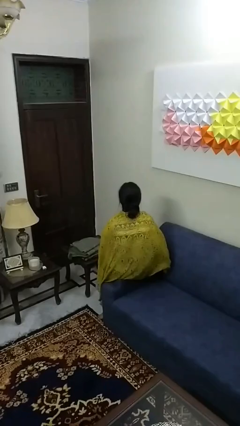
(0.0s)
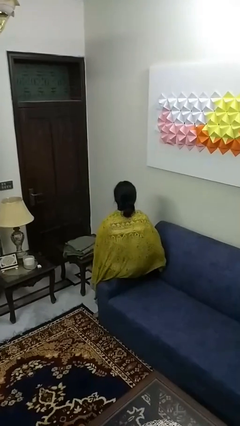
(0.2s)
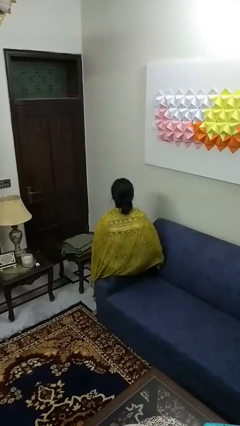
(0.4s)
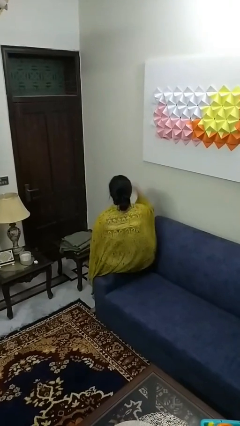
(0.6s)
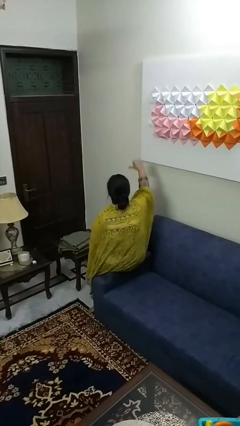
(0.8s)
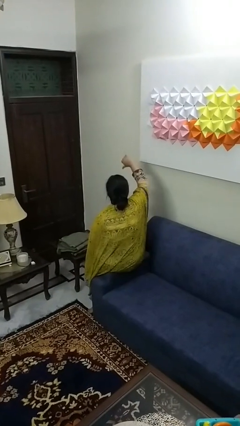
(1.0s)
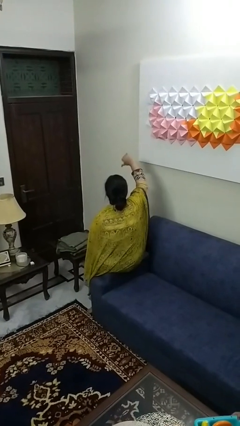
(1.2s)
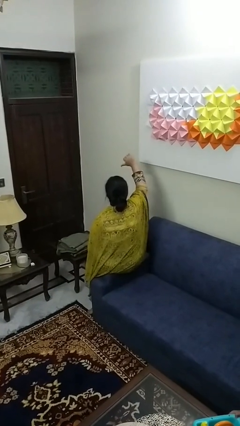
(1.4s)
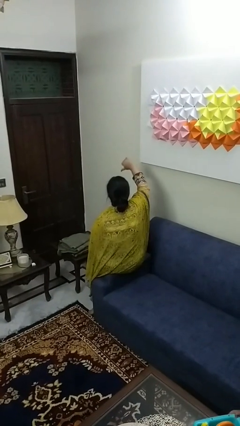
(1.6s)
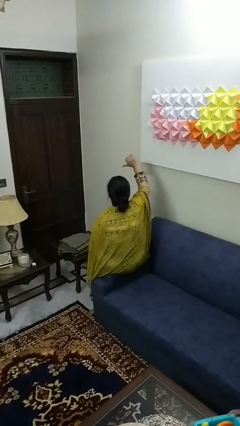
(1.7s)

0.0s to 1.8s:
person gestures thumbs down

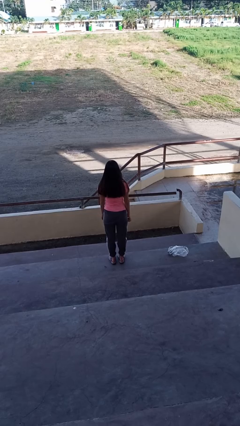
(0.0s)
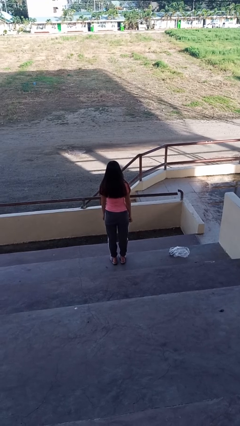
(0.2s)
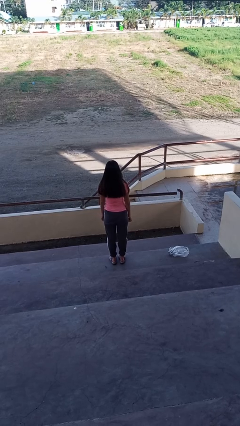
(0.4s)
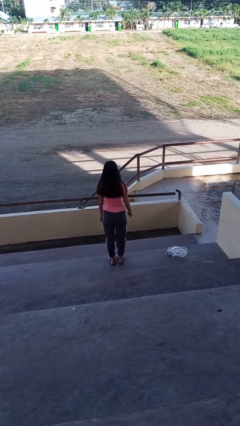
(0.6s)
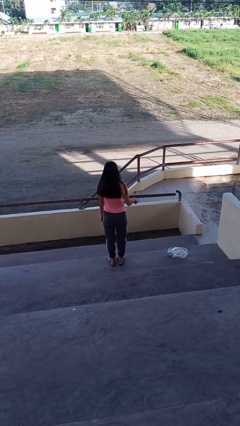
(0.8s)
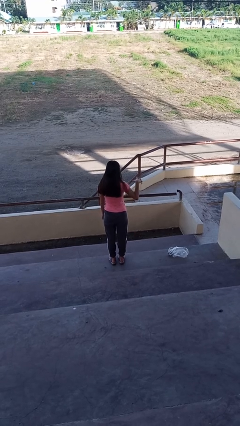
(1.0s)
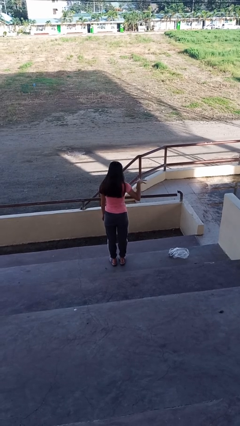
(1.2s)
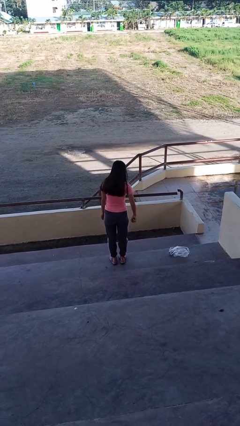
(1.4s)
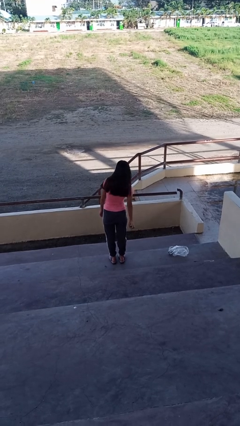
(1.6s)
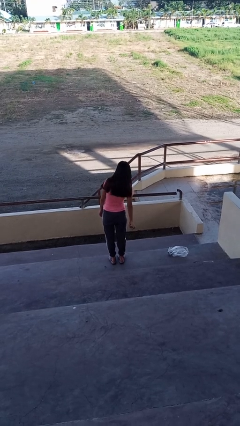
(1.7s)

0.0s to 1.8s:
person drops object

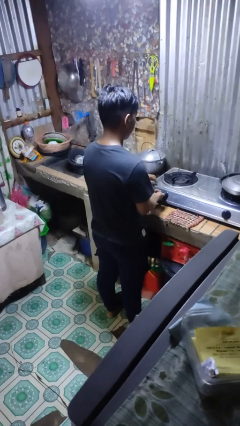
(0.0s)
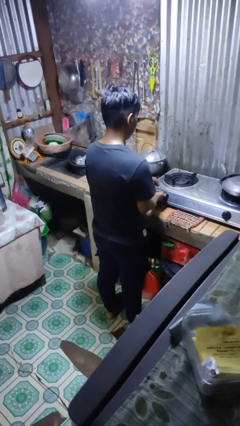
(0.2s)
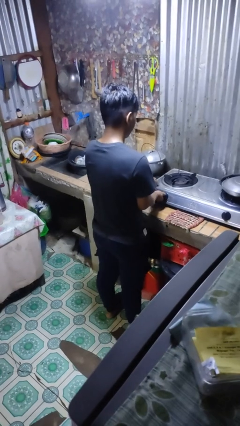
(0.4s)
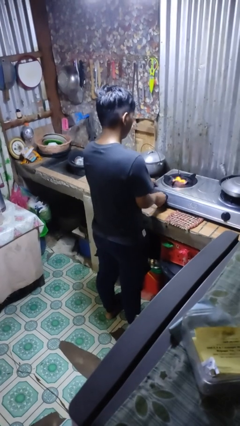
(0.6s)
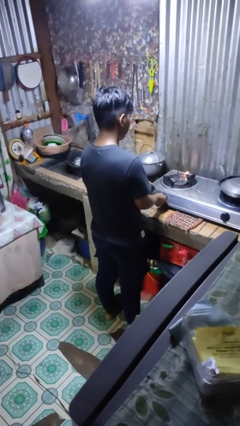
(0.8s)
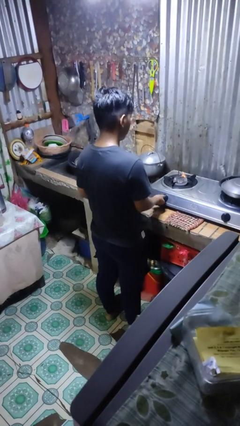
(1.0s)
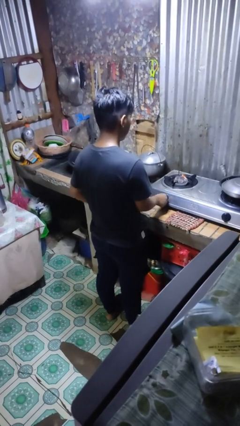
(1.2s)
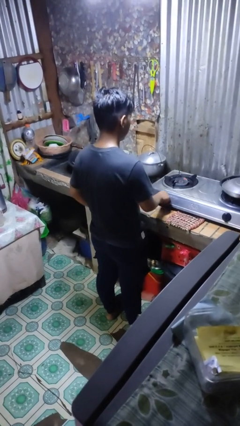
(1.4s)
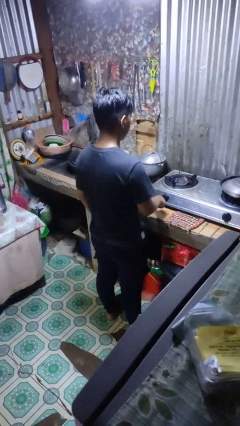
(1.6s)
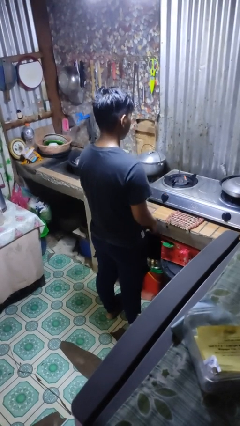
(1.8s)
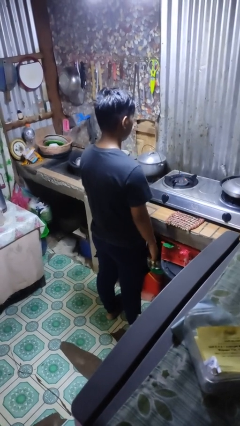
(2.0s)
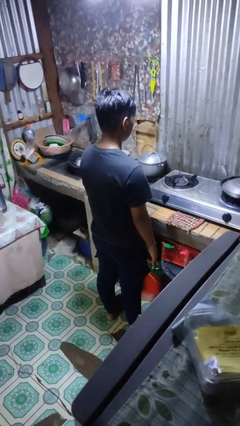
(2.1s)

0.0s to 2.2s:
person turns on stovetop

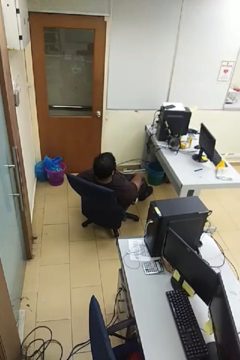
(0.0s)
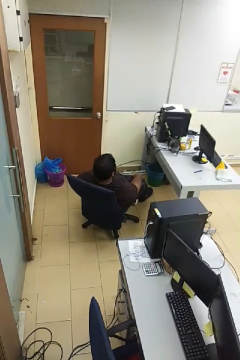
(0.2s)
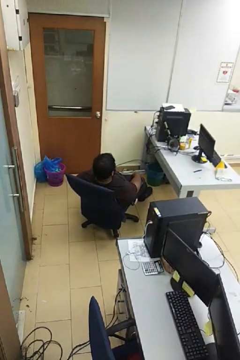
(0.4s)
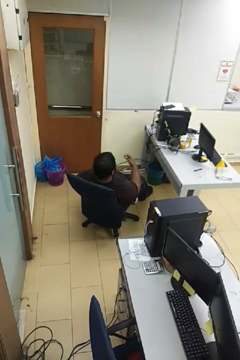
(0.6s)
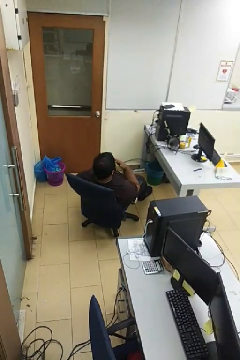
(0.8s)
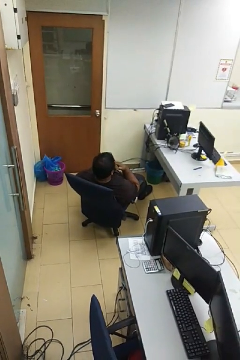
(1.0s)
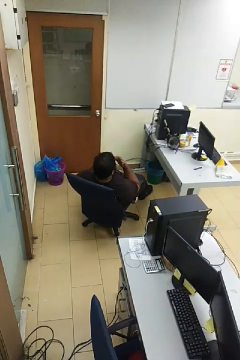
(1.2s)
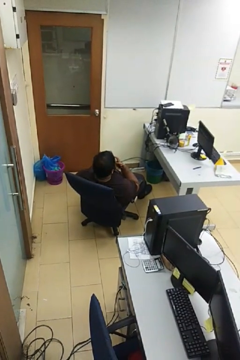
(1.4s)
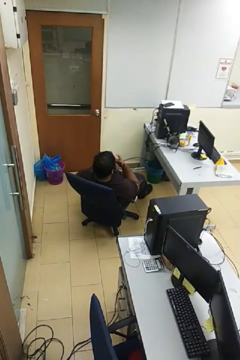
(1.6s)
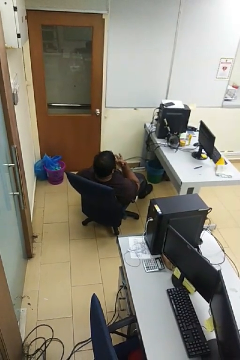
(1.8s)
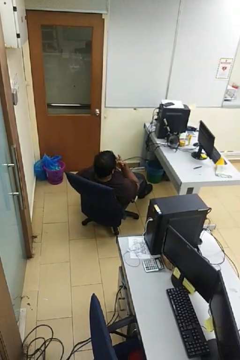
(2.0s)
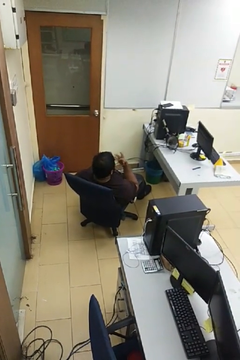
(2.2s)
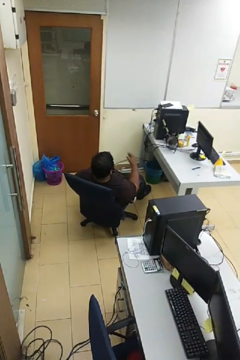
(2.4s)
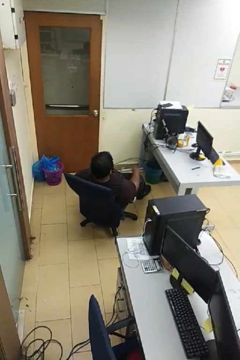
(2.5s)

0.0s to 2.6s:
person licks fingers

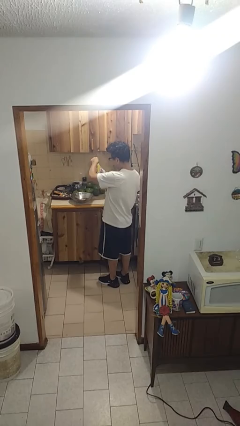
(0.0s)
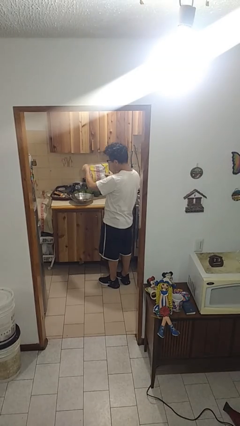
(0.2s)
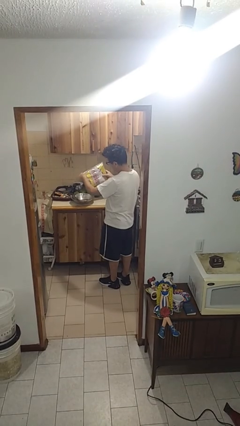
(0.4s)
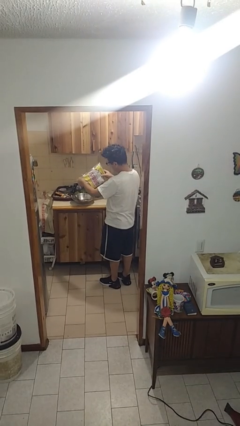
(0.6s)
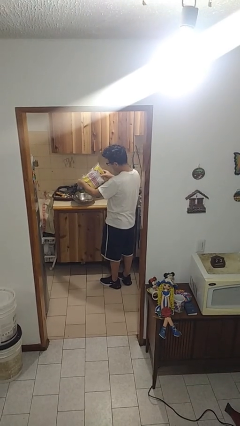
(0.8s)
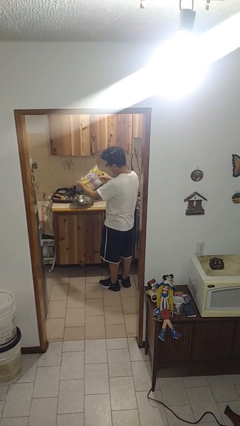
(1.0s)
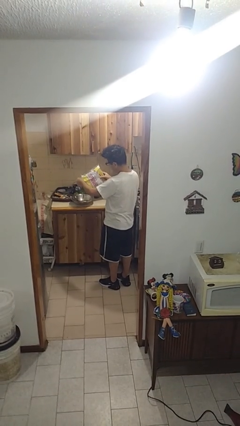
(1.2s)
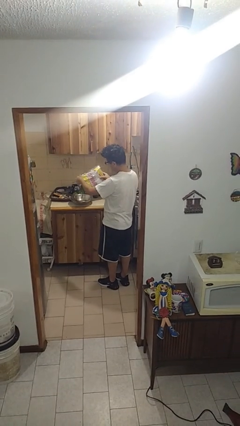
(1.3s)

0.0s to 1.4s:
person pours into bowl

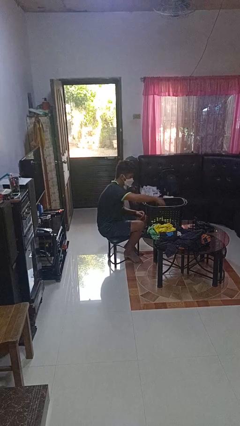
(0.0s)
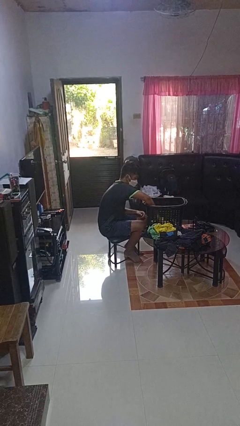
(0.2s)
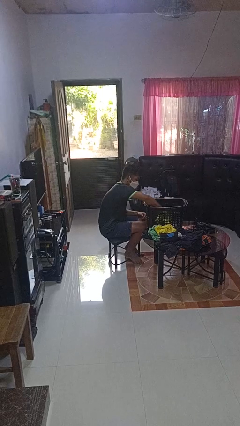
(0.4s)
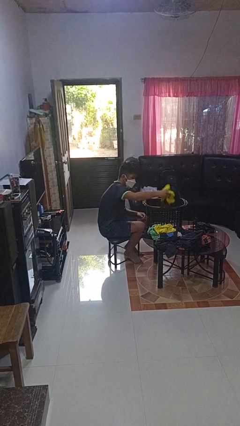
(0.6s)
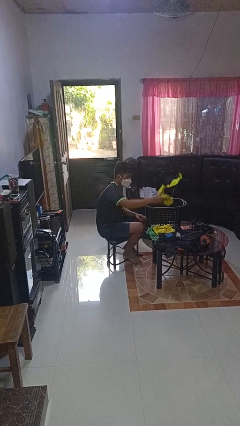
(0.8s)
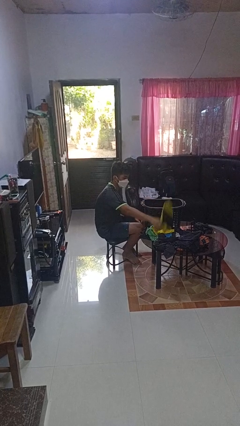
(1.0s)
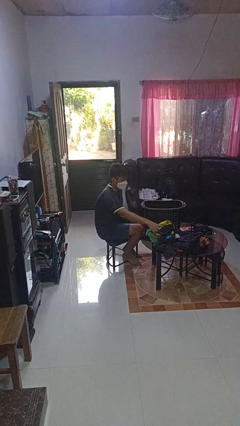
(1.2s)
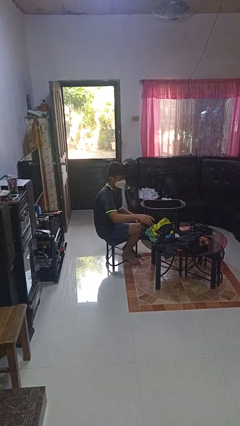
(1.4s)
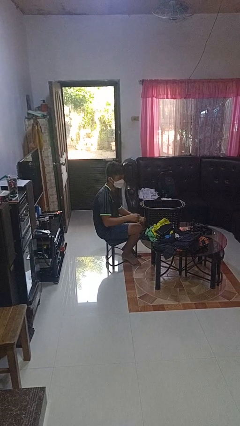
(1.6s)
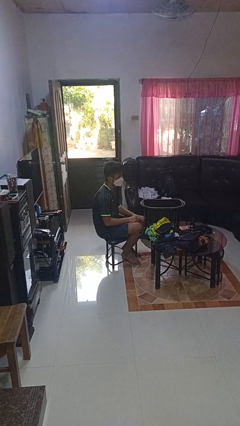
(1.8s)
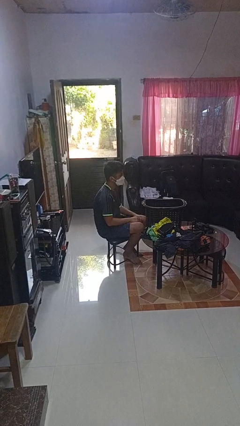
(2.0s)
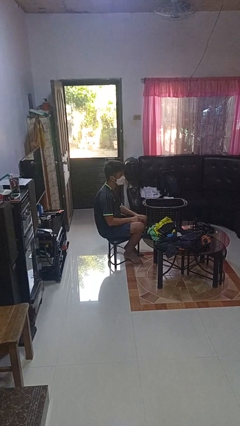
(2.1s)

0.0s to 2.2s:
person takes object from basket

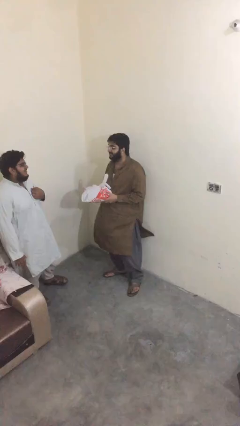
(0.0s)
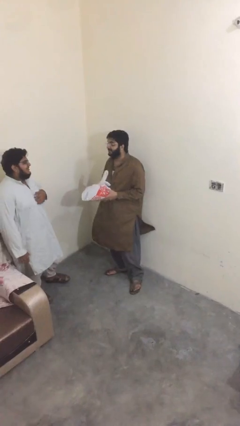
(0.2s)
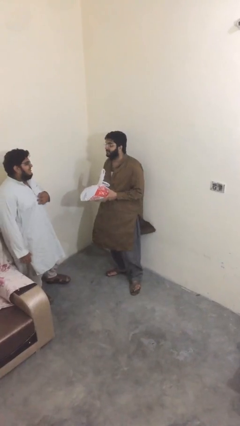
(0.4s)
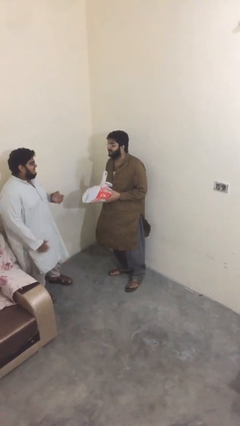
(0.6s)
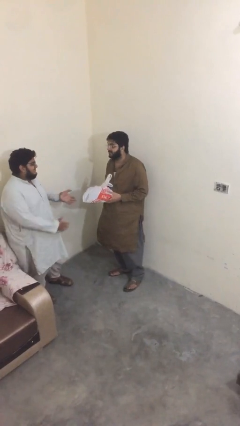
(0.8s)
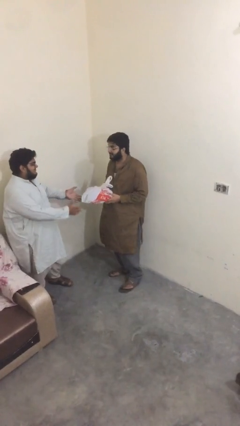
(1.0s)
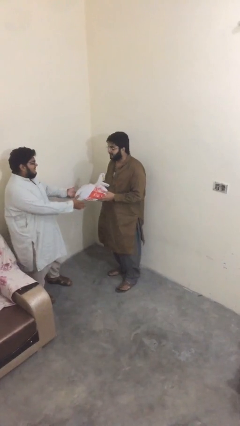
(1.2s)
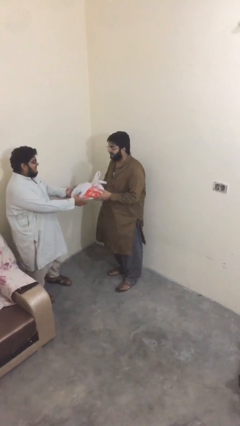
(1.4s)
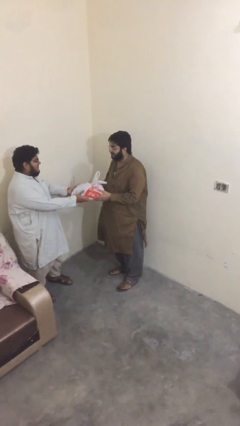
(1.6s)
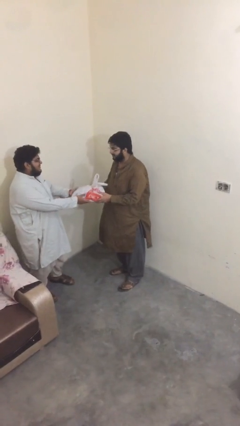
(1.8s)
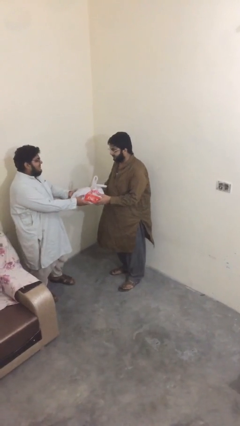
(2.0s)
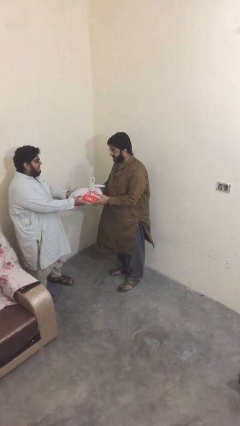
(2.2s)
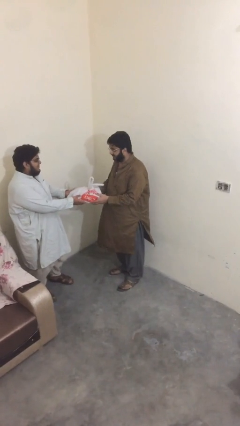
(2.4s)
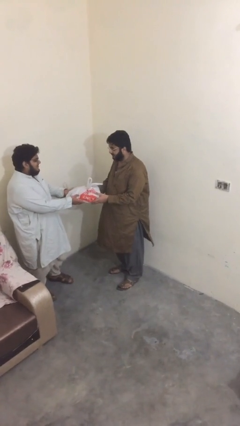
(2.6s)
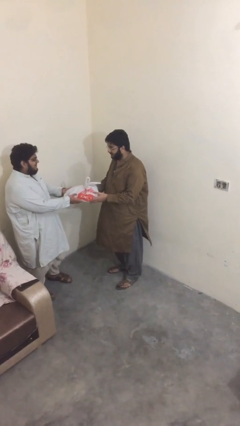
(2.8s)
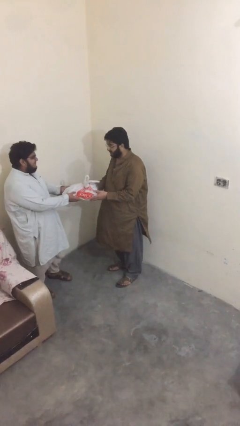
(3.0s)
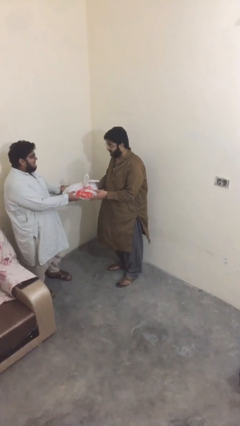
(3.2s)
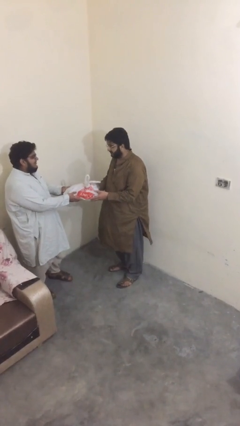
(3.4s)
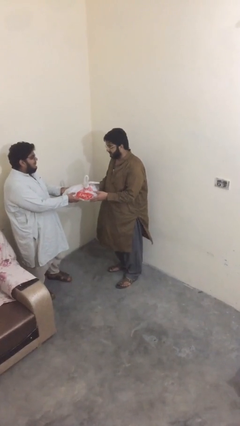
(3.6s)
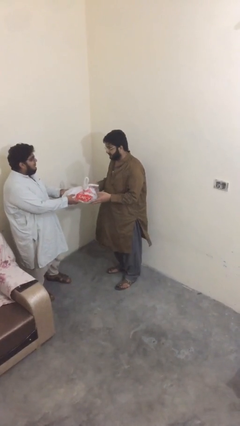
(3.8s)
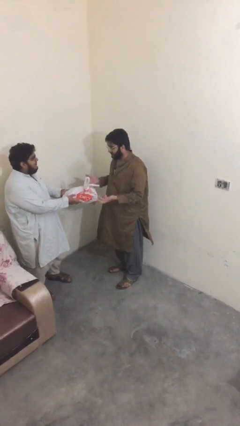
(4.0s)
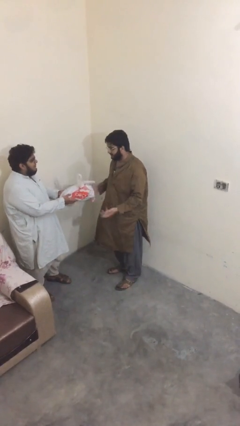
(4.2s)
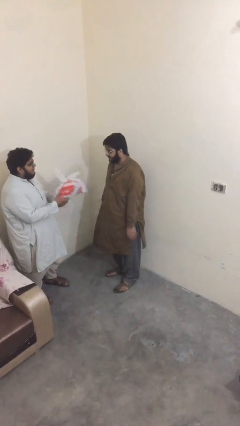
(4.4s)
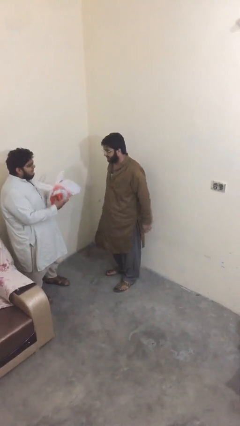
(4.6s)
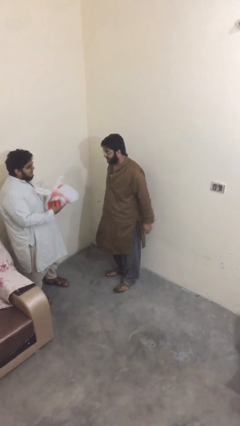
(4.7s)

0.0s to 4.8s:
person transfers object to person

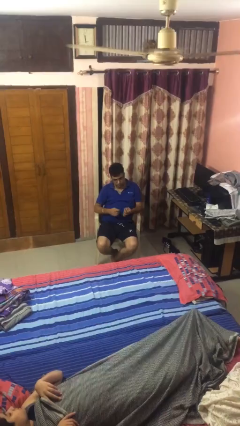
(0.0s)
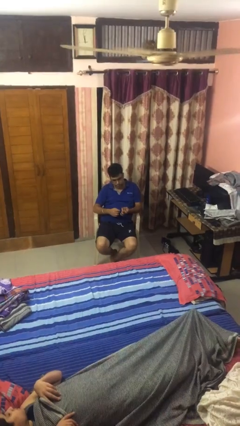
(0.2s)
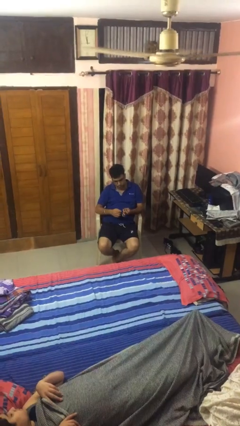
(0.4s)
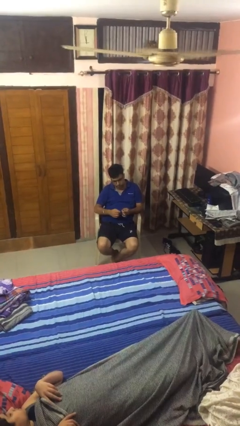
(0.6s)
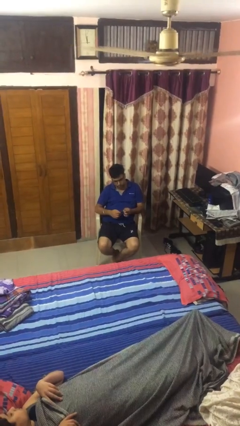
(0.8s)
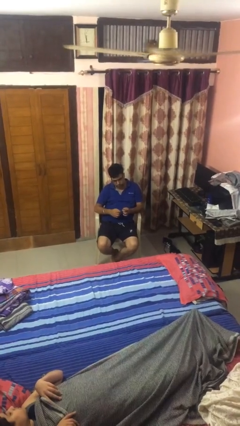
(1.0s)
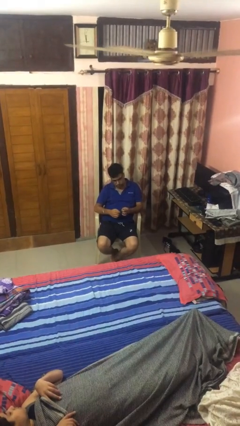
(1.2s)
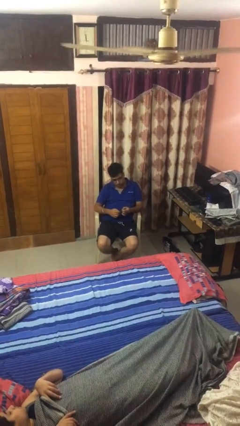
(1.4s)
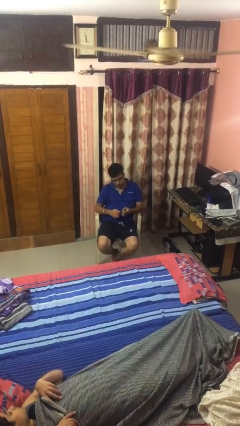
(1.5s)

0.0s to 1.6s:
person files fingernails
